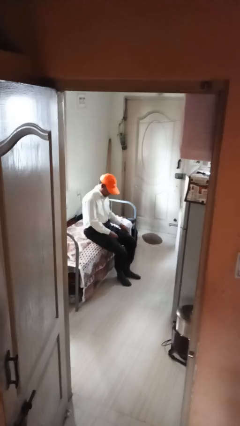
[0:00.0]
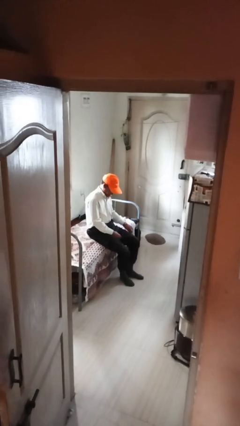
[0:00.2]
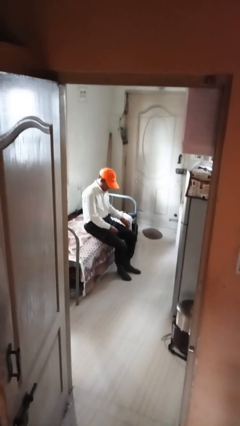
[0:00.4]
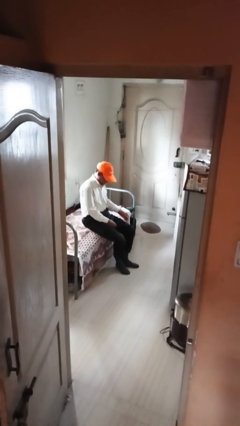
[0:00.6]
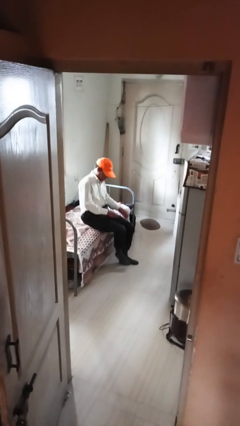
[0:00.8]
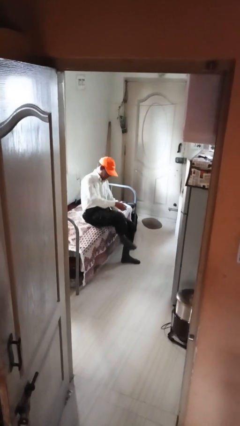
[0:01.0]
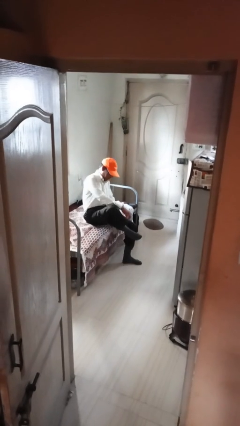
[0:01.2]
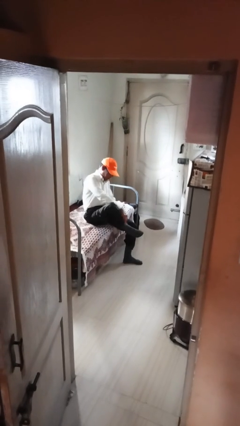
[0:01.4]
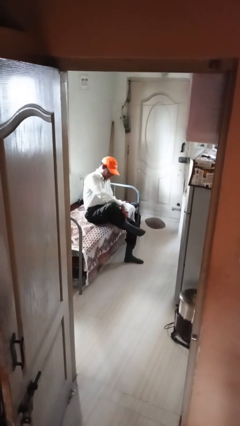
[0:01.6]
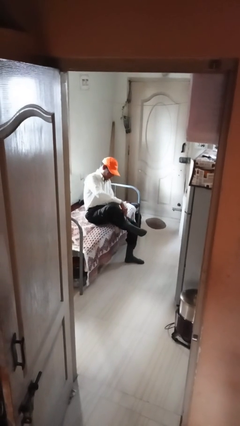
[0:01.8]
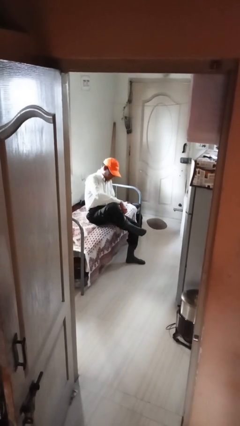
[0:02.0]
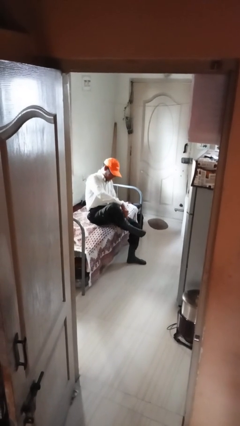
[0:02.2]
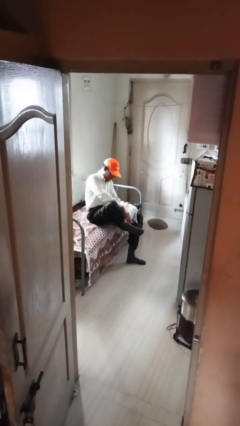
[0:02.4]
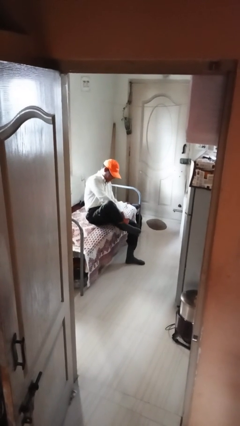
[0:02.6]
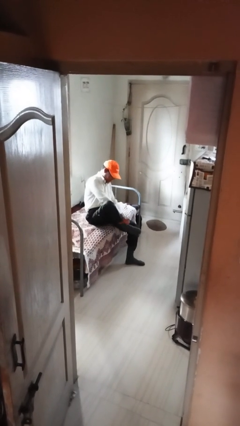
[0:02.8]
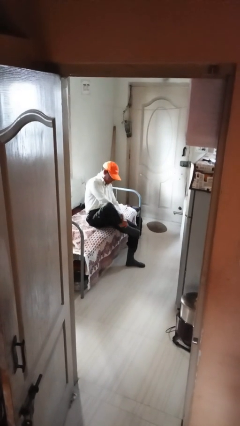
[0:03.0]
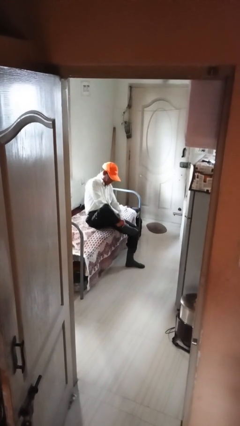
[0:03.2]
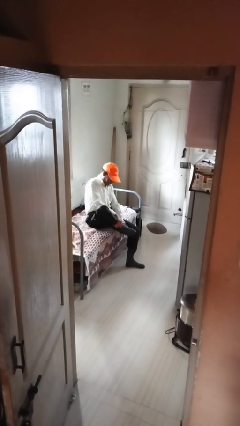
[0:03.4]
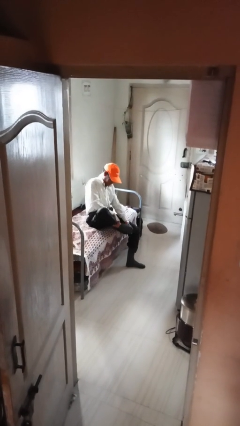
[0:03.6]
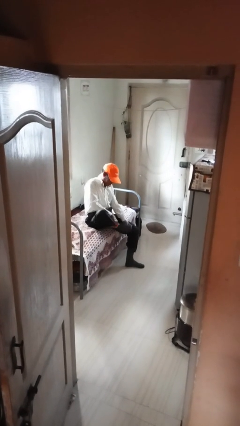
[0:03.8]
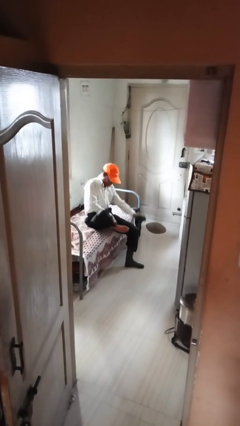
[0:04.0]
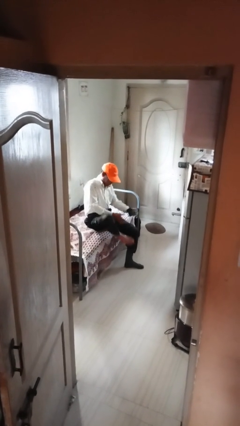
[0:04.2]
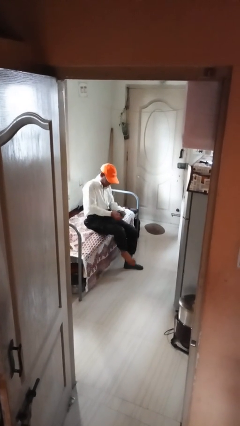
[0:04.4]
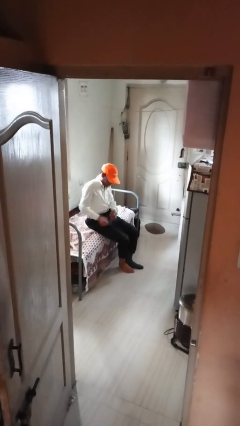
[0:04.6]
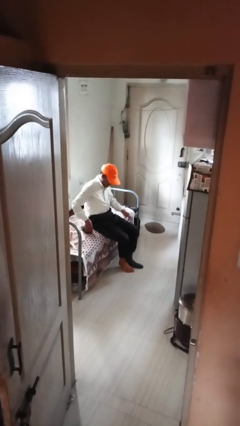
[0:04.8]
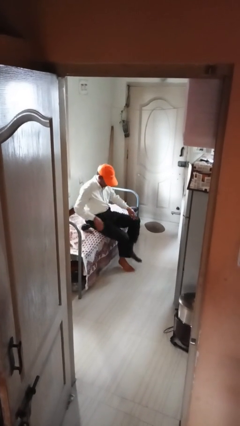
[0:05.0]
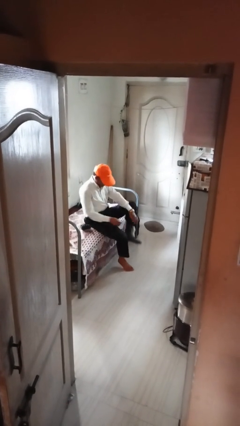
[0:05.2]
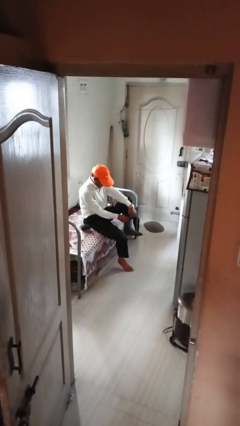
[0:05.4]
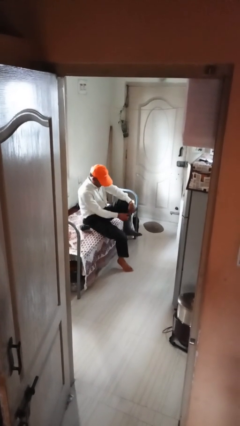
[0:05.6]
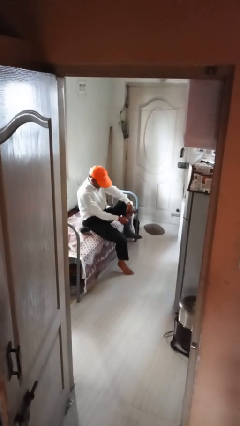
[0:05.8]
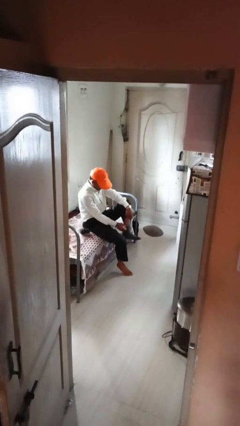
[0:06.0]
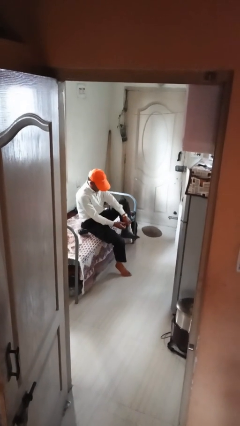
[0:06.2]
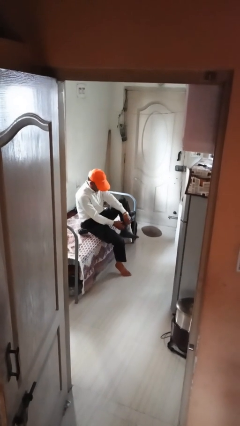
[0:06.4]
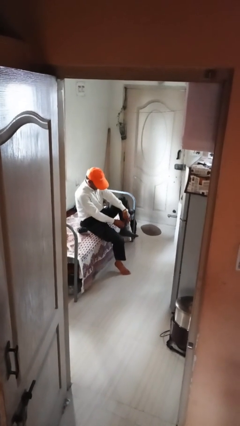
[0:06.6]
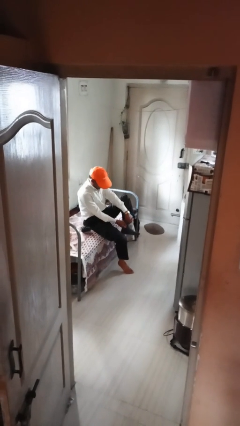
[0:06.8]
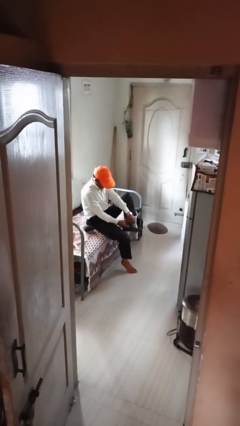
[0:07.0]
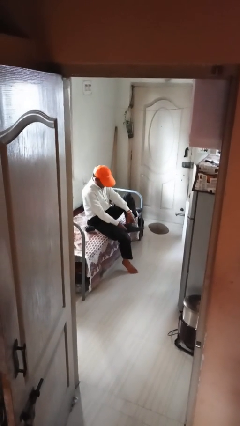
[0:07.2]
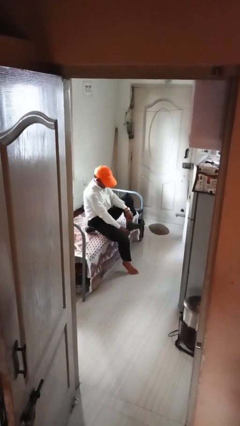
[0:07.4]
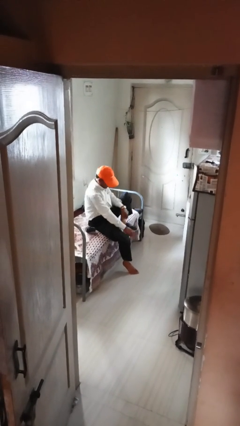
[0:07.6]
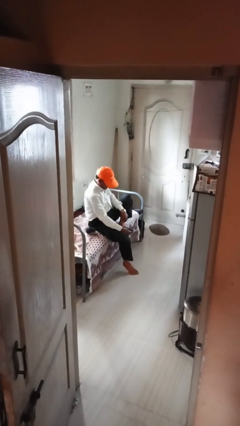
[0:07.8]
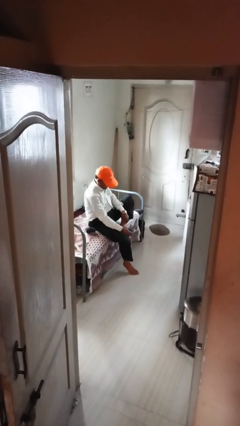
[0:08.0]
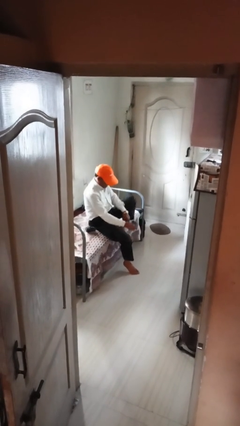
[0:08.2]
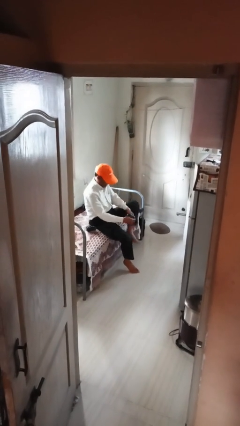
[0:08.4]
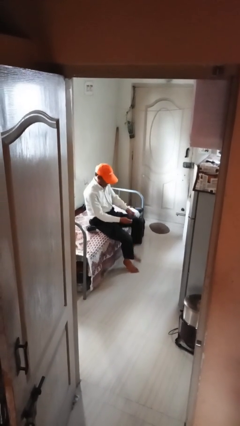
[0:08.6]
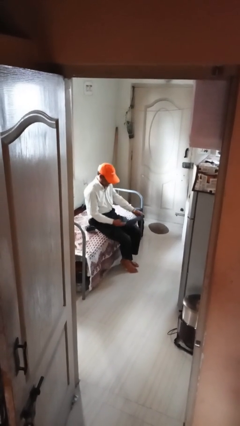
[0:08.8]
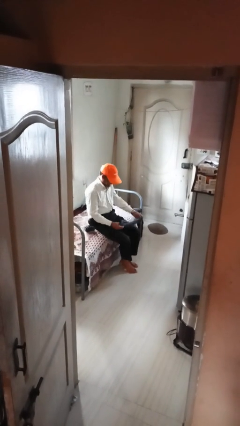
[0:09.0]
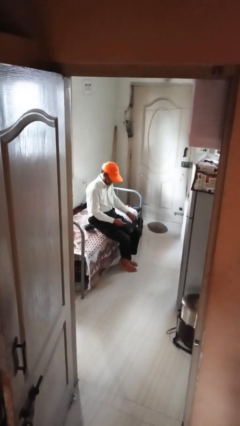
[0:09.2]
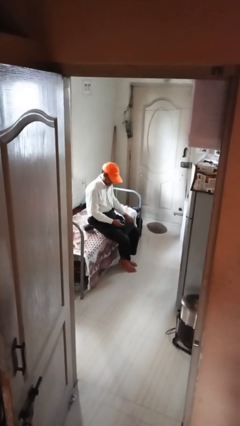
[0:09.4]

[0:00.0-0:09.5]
person takes off socks

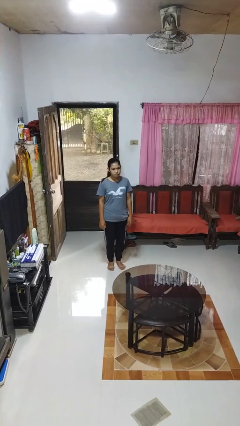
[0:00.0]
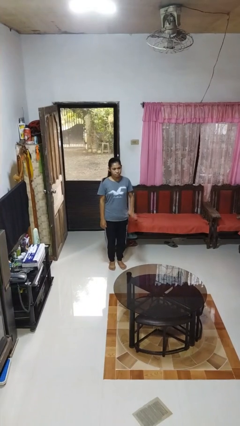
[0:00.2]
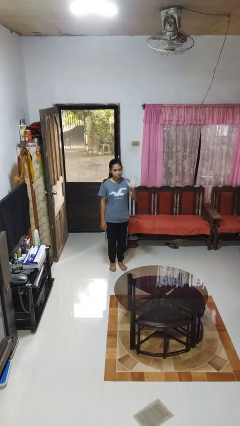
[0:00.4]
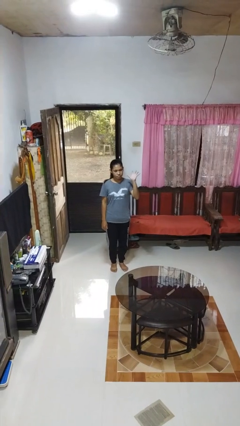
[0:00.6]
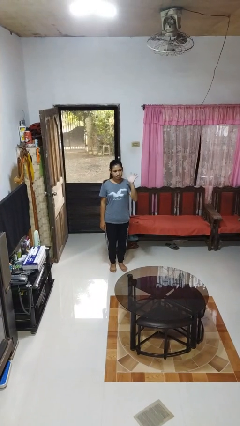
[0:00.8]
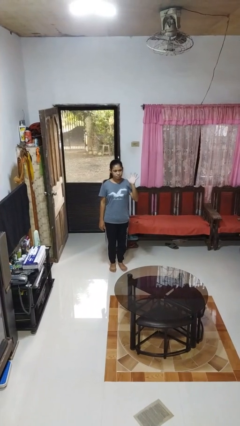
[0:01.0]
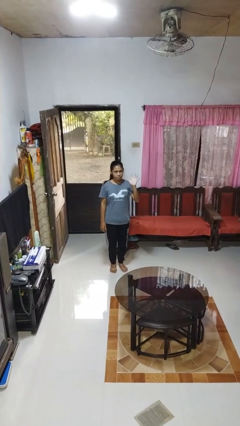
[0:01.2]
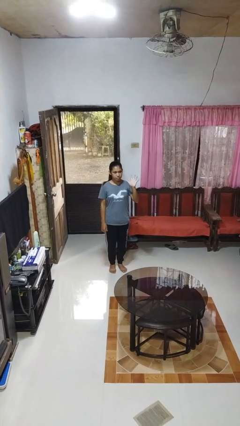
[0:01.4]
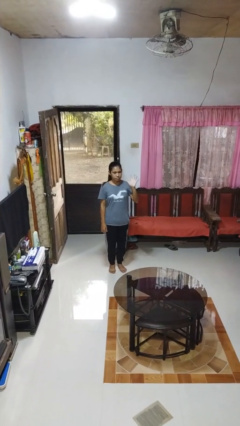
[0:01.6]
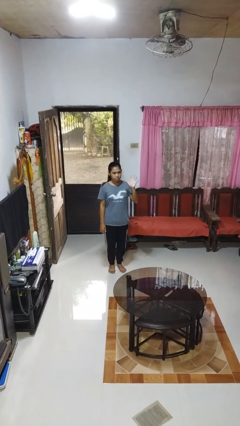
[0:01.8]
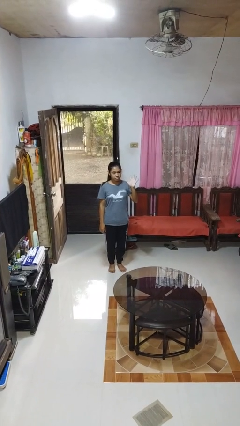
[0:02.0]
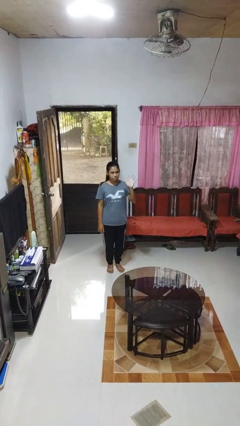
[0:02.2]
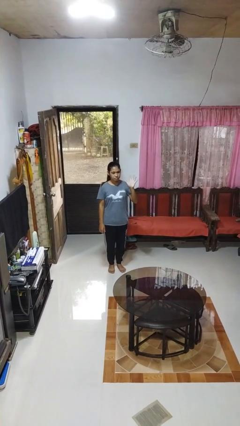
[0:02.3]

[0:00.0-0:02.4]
person gestures number five

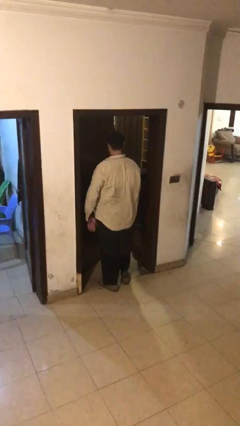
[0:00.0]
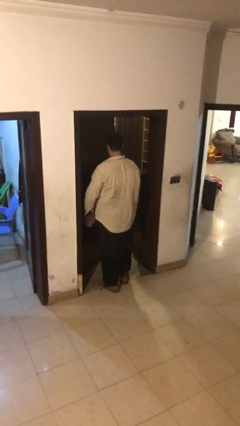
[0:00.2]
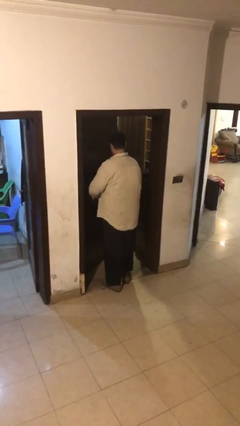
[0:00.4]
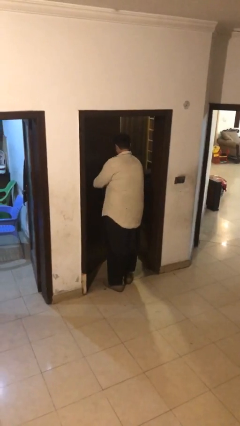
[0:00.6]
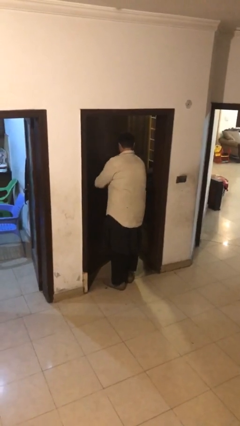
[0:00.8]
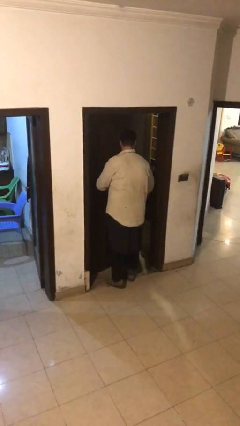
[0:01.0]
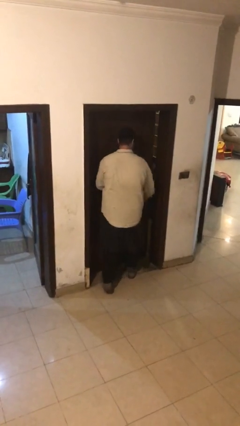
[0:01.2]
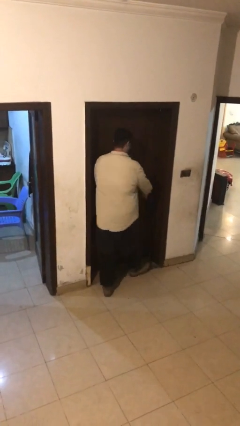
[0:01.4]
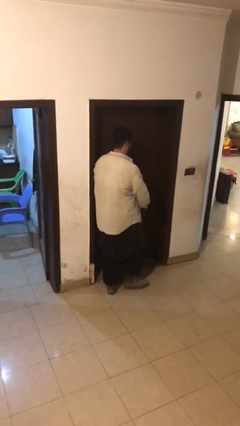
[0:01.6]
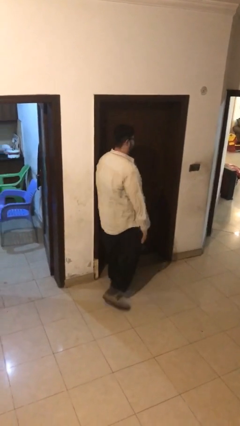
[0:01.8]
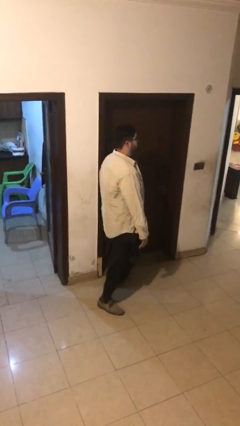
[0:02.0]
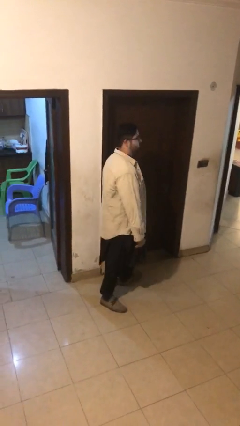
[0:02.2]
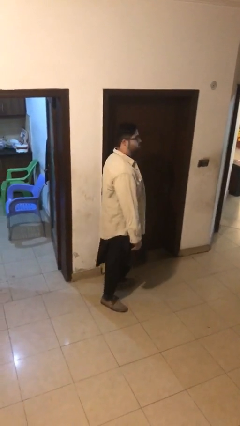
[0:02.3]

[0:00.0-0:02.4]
person closes facility door

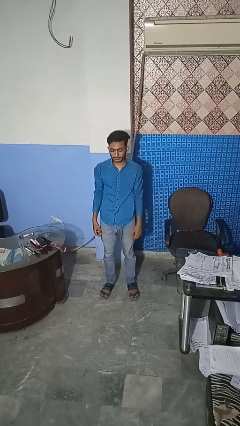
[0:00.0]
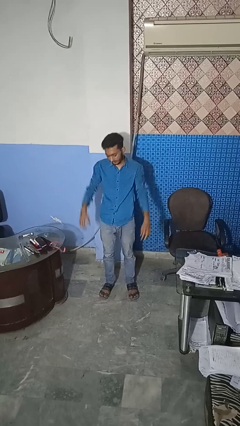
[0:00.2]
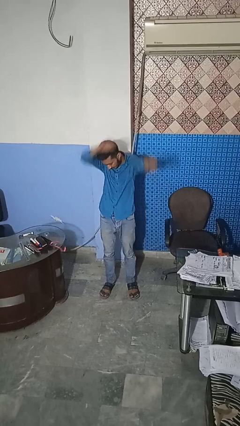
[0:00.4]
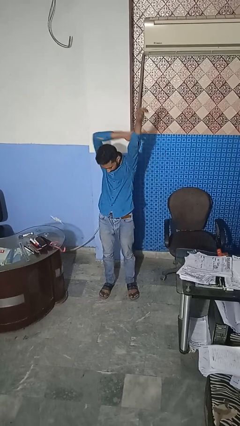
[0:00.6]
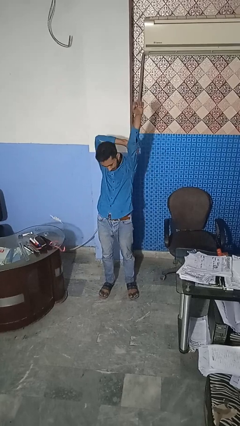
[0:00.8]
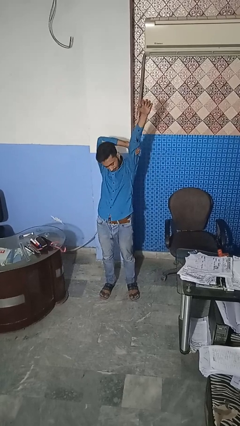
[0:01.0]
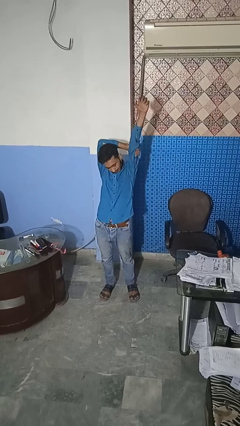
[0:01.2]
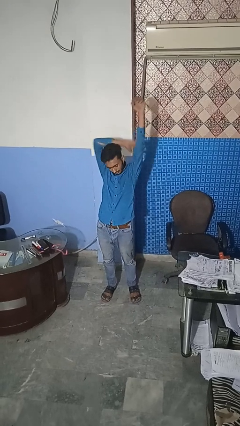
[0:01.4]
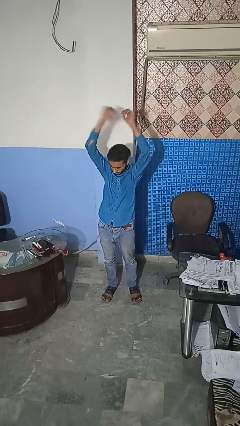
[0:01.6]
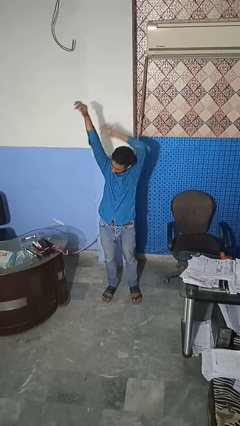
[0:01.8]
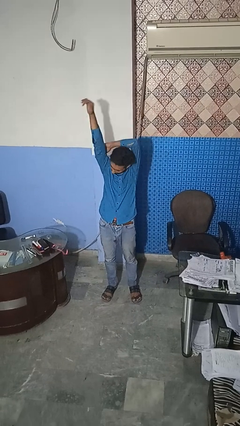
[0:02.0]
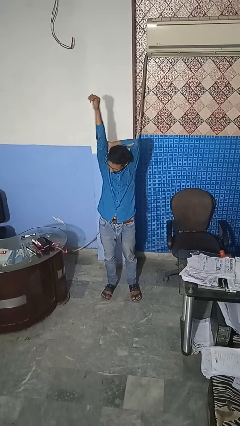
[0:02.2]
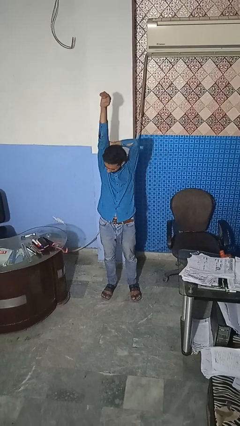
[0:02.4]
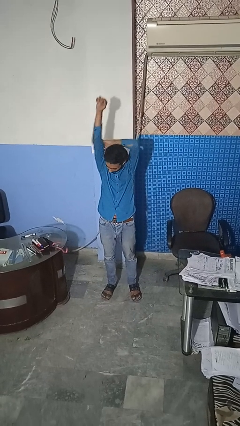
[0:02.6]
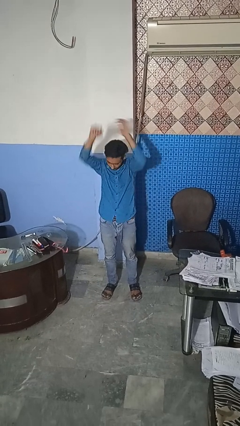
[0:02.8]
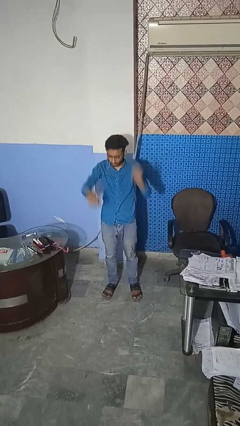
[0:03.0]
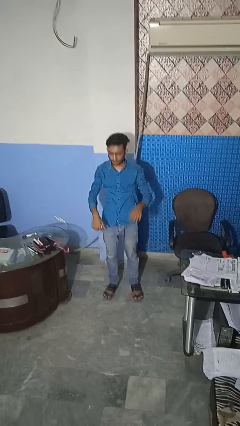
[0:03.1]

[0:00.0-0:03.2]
person stretches arms over head

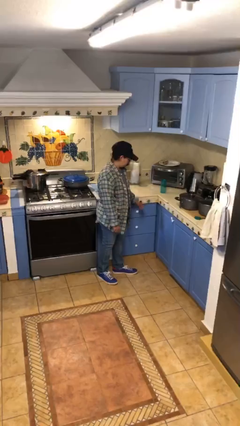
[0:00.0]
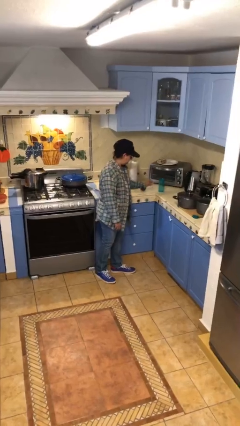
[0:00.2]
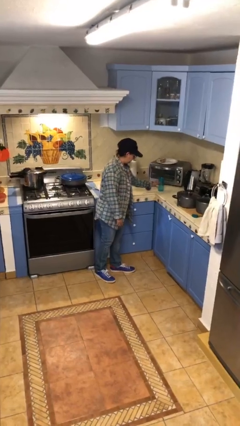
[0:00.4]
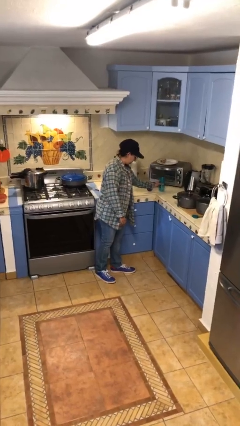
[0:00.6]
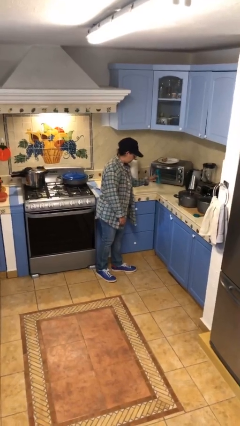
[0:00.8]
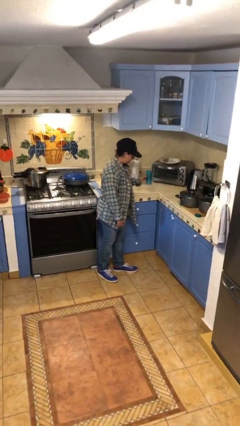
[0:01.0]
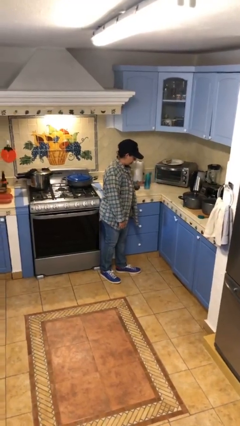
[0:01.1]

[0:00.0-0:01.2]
person picks up object from countertop
